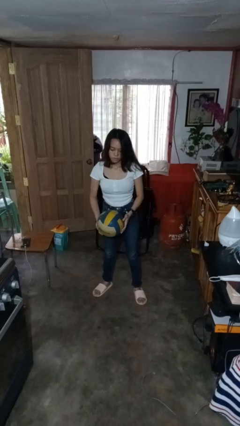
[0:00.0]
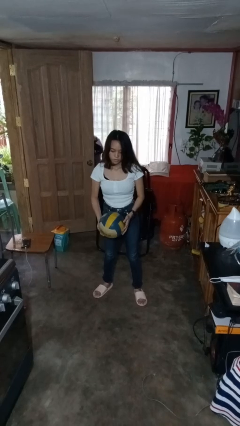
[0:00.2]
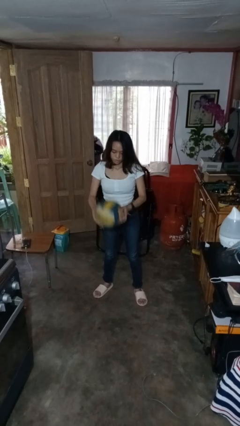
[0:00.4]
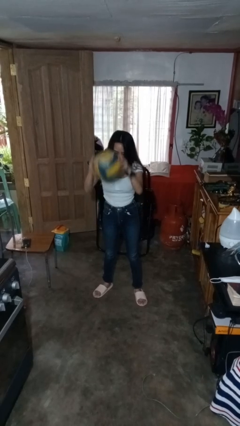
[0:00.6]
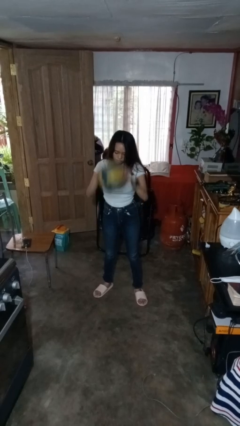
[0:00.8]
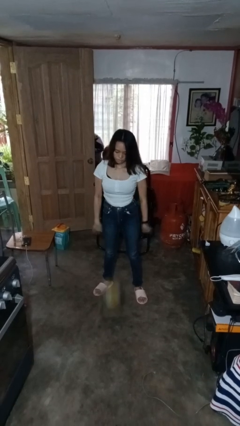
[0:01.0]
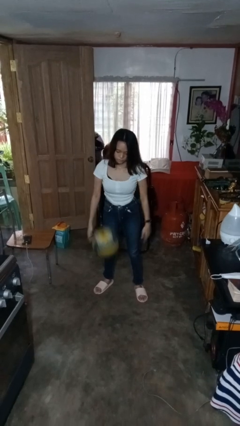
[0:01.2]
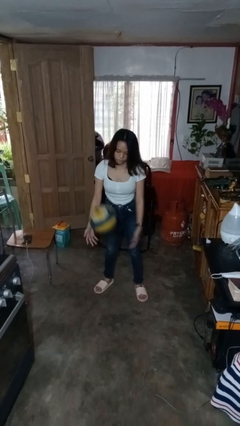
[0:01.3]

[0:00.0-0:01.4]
person bounces ball on floor

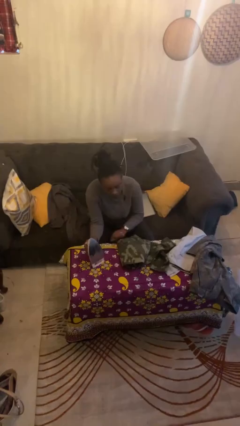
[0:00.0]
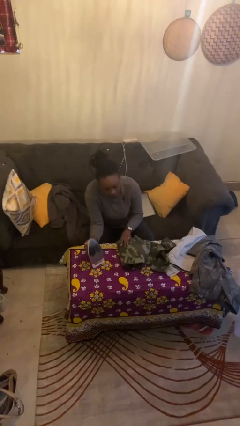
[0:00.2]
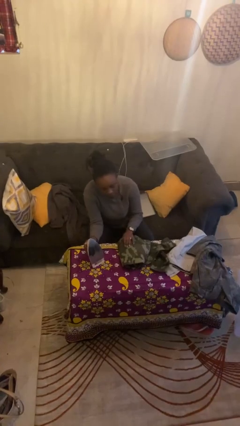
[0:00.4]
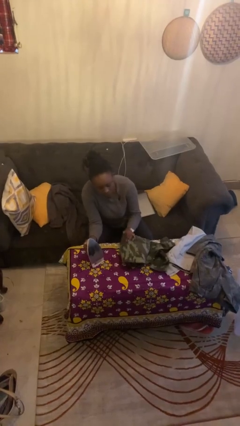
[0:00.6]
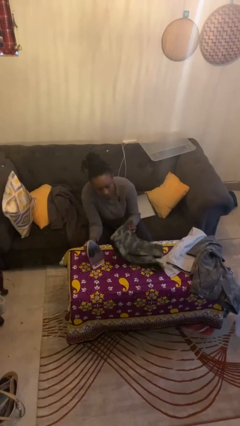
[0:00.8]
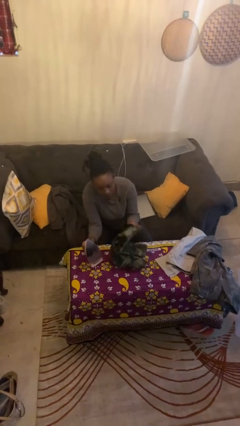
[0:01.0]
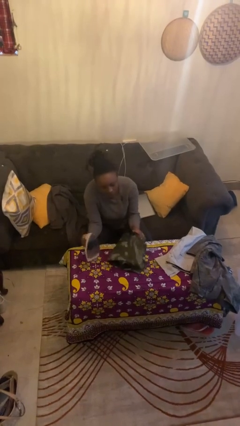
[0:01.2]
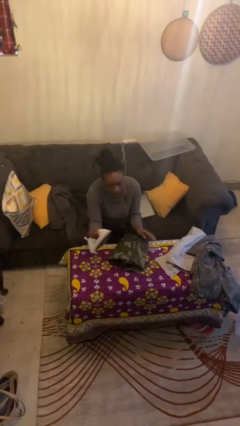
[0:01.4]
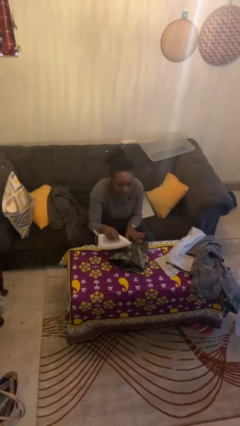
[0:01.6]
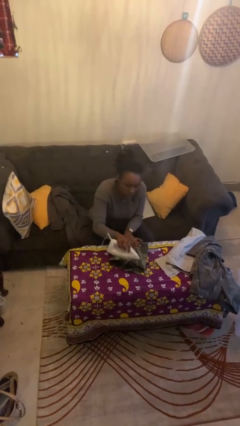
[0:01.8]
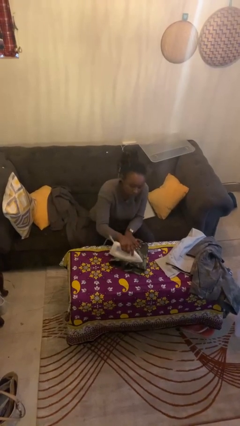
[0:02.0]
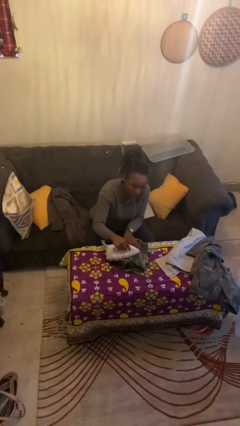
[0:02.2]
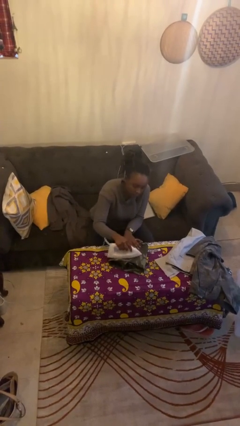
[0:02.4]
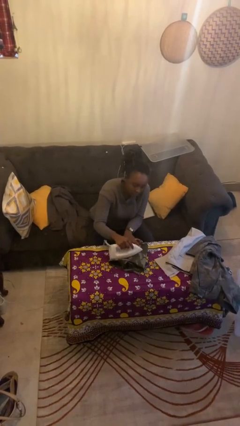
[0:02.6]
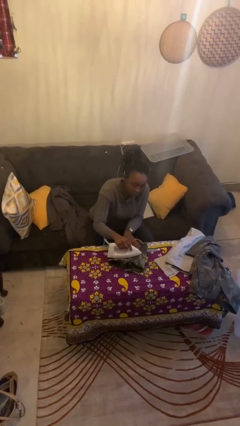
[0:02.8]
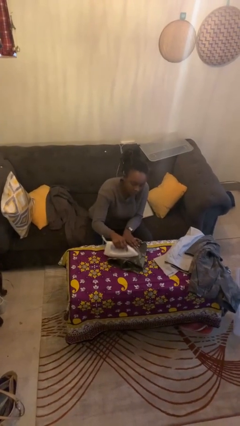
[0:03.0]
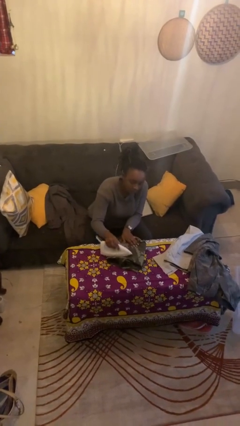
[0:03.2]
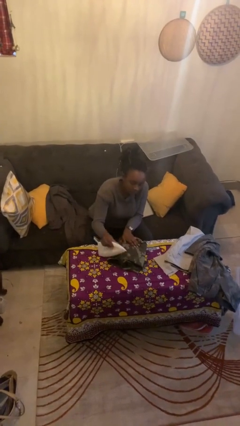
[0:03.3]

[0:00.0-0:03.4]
person irons clothes

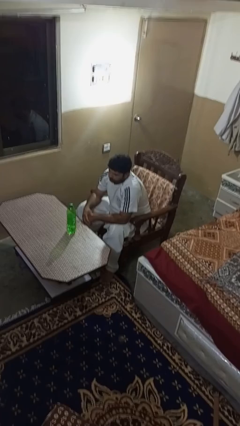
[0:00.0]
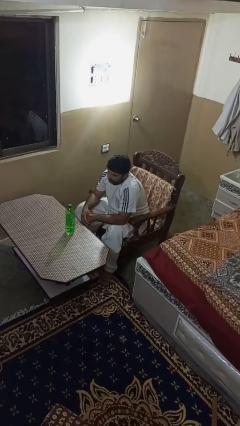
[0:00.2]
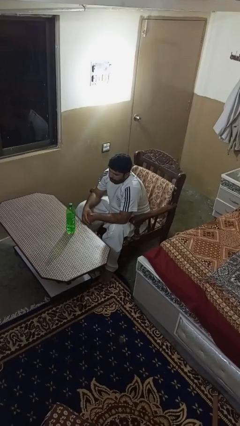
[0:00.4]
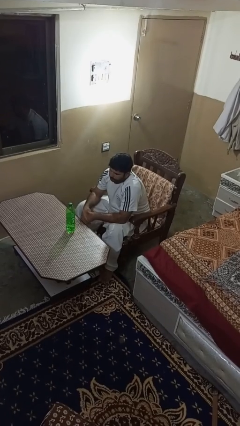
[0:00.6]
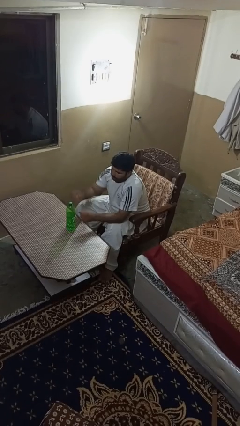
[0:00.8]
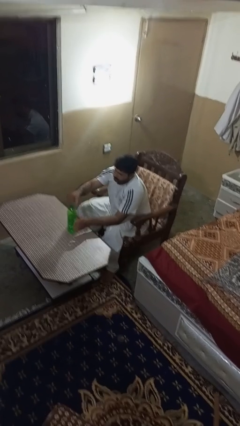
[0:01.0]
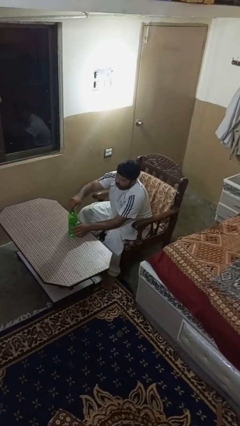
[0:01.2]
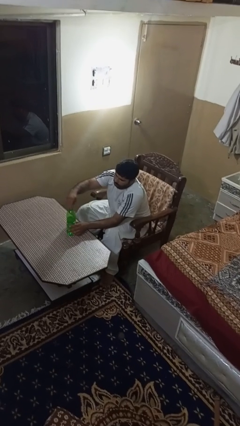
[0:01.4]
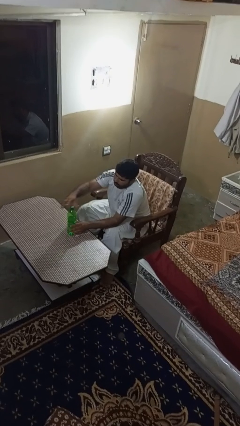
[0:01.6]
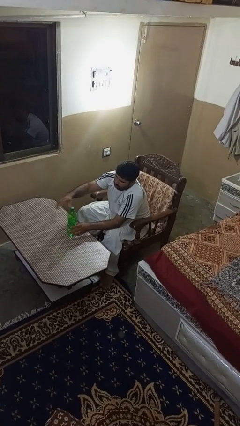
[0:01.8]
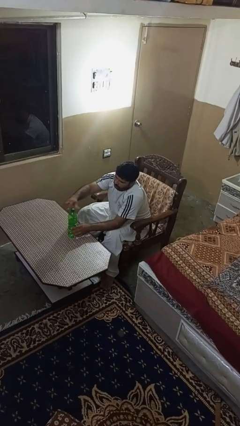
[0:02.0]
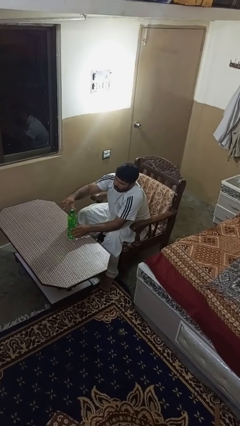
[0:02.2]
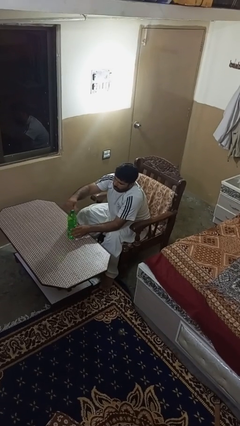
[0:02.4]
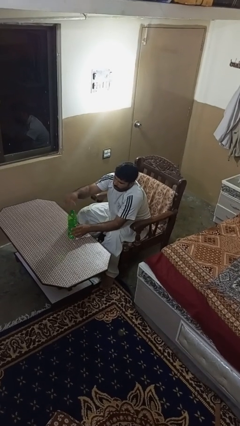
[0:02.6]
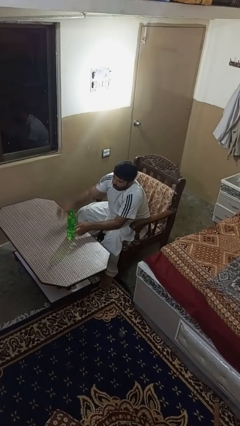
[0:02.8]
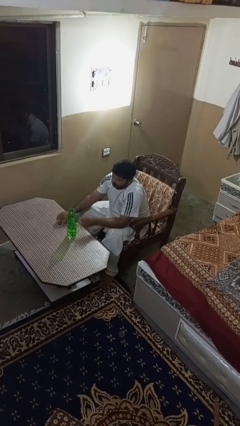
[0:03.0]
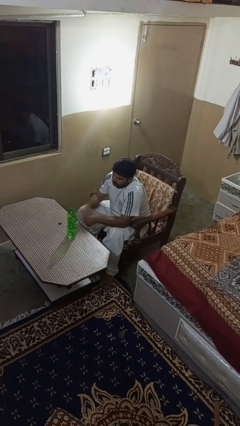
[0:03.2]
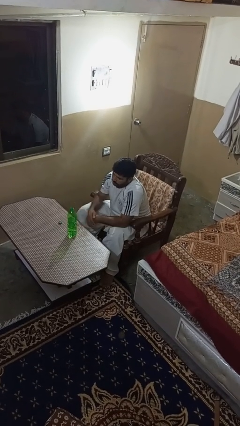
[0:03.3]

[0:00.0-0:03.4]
person unscrews lid from bottle

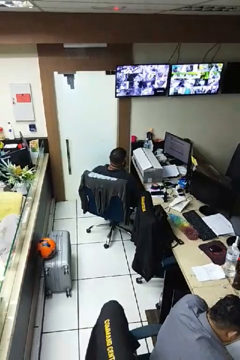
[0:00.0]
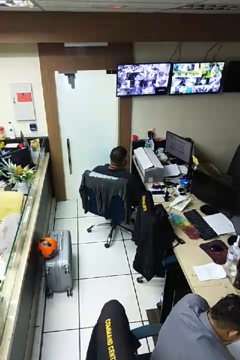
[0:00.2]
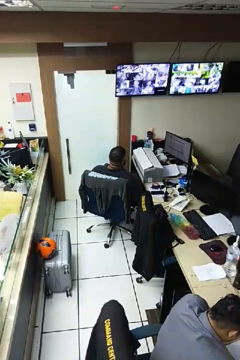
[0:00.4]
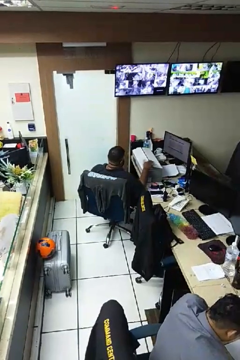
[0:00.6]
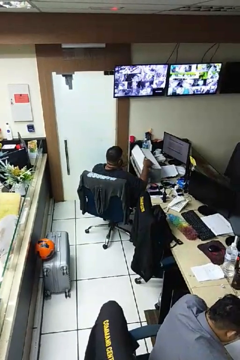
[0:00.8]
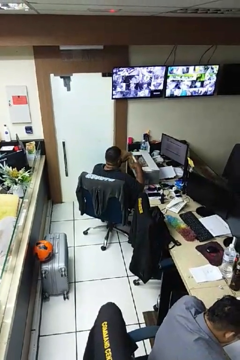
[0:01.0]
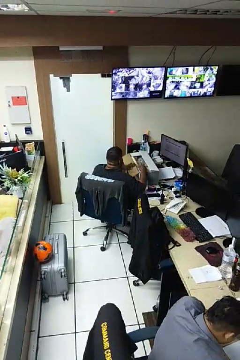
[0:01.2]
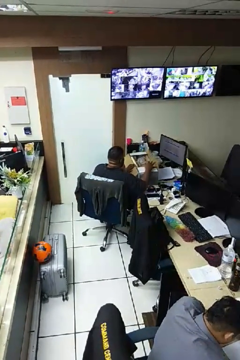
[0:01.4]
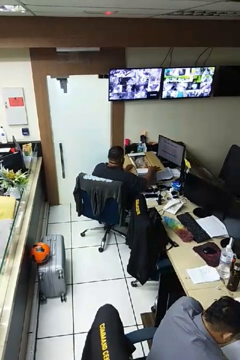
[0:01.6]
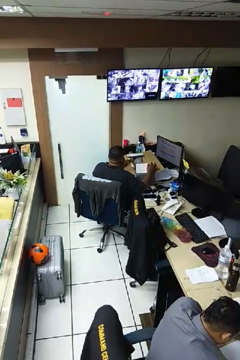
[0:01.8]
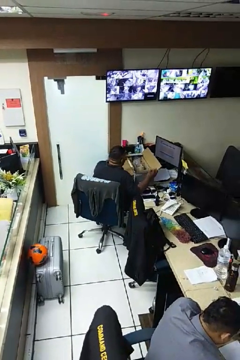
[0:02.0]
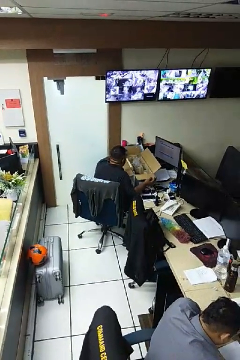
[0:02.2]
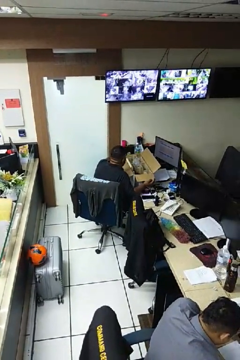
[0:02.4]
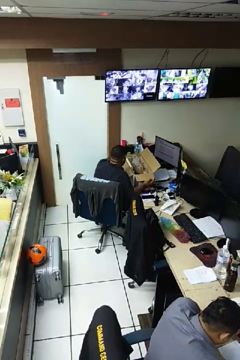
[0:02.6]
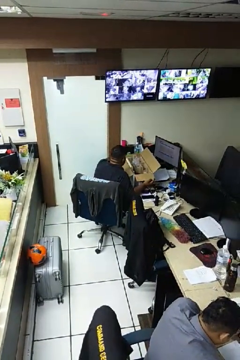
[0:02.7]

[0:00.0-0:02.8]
person opens box

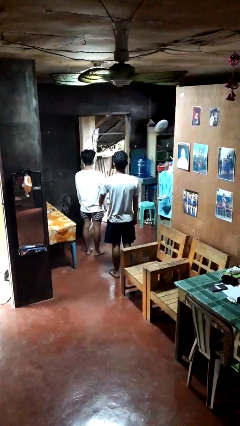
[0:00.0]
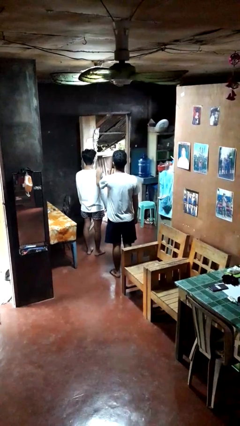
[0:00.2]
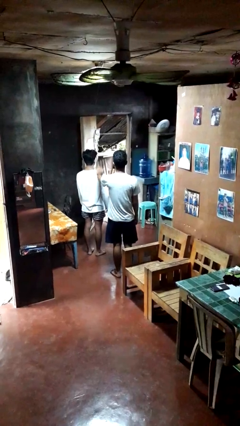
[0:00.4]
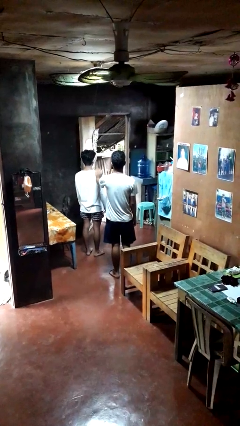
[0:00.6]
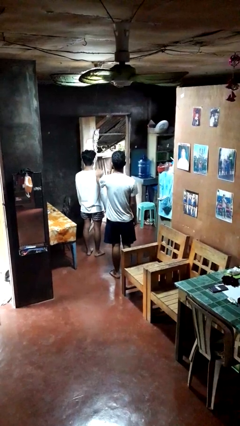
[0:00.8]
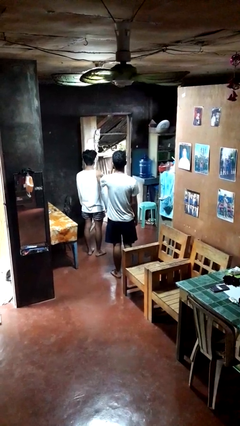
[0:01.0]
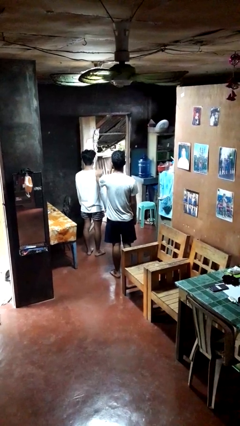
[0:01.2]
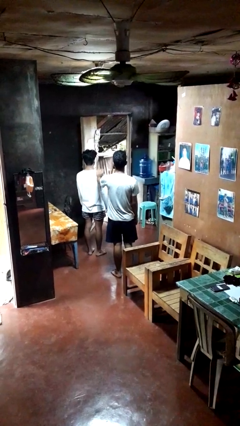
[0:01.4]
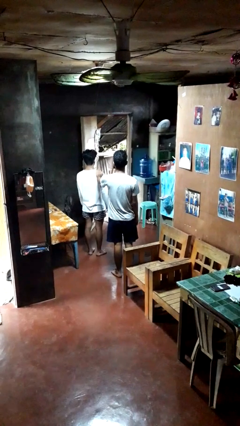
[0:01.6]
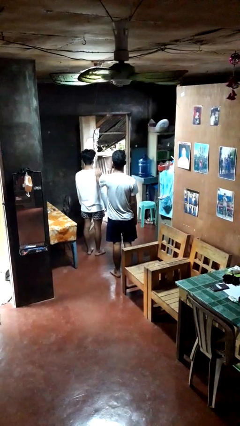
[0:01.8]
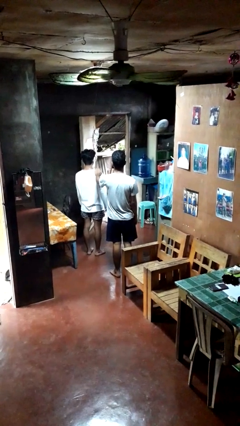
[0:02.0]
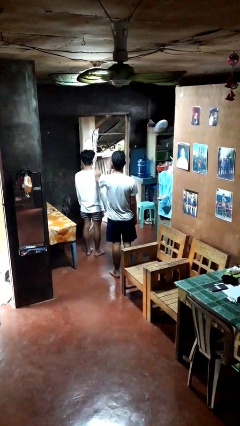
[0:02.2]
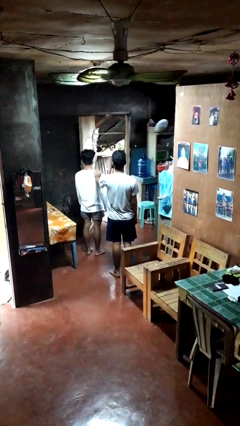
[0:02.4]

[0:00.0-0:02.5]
person pounds shoulders of person

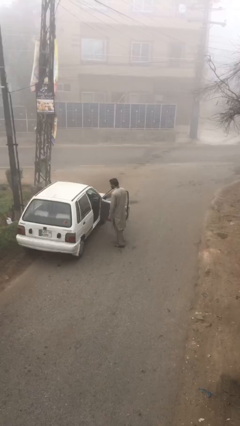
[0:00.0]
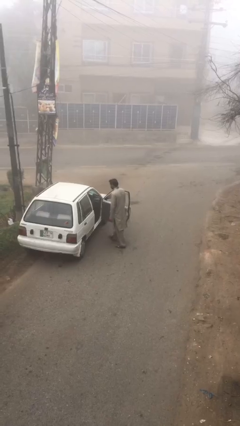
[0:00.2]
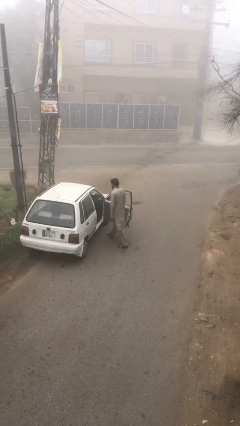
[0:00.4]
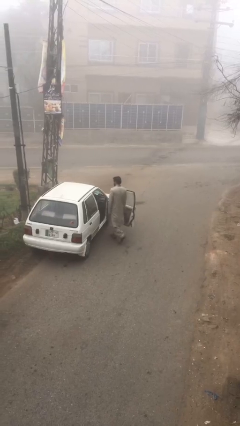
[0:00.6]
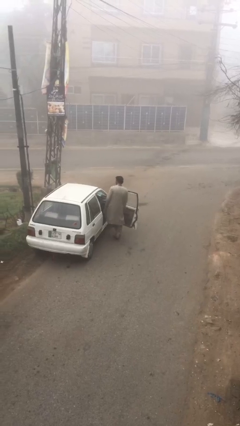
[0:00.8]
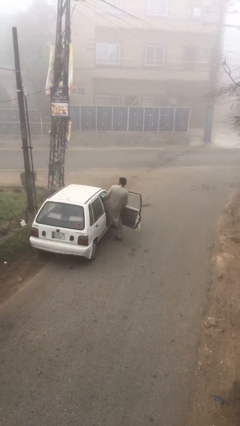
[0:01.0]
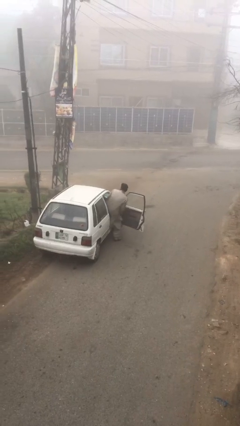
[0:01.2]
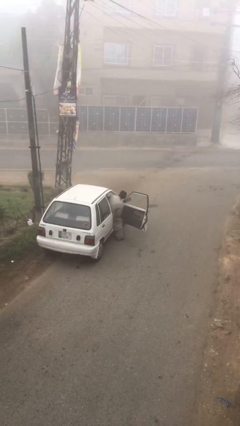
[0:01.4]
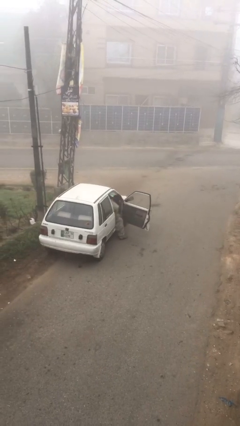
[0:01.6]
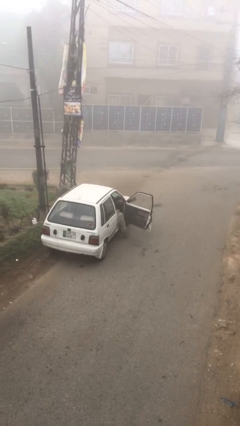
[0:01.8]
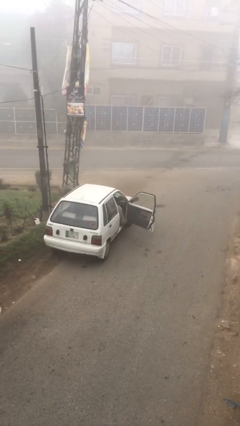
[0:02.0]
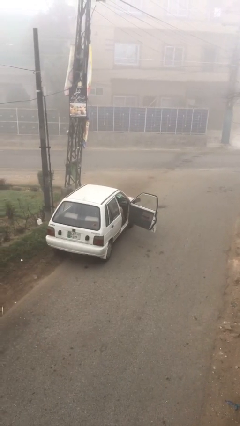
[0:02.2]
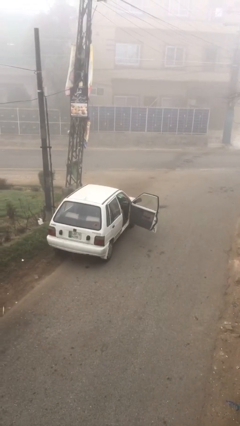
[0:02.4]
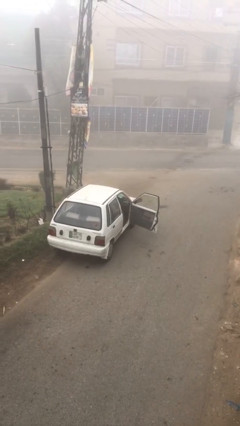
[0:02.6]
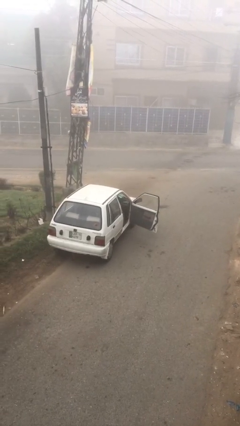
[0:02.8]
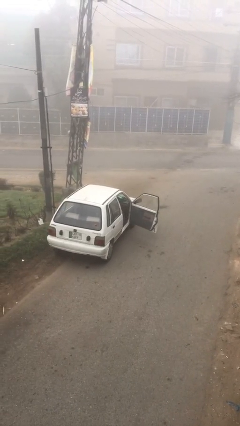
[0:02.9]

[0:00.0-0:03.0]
person enters car

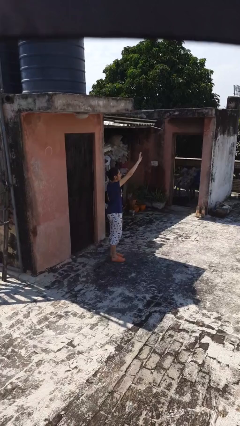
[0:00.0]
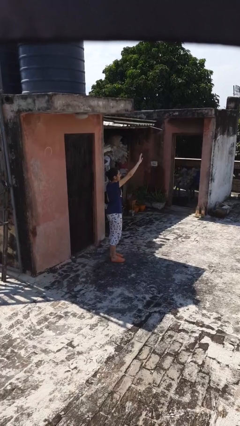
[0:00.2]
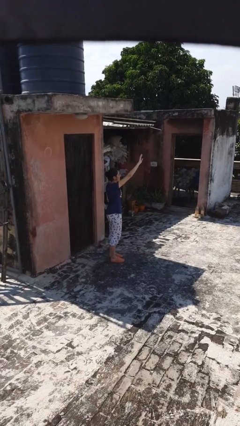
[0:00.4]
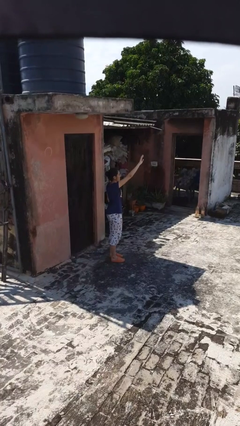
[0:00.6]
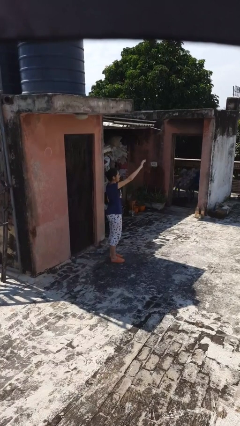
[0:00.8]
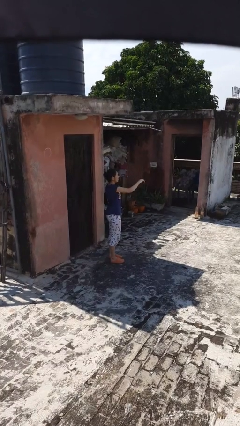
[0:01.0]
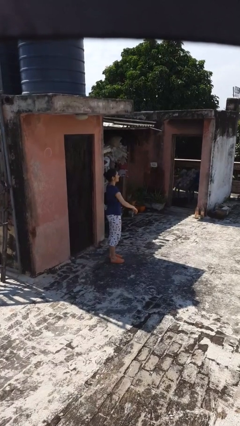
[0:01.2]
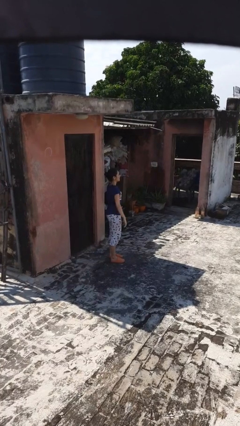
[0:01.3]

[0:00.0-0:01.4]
person gestures raise hand
